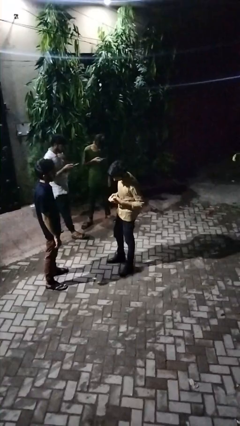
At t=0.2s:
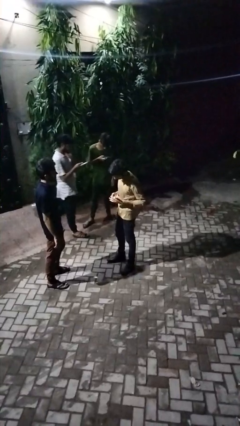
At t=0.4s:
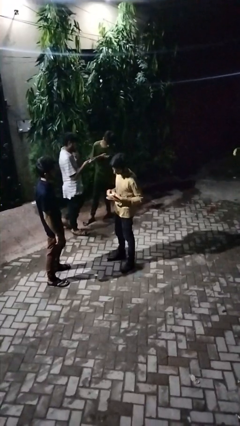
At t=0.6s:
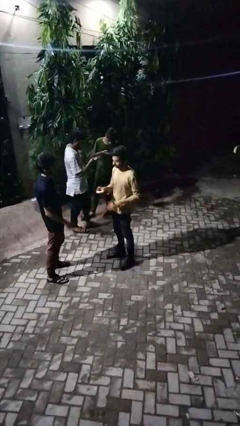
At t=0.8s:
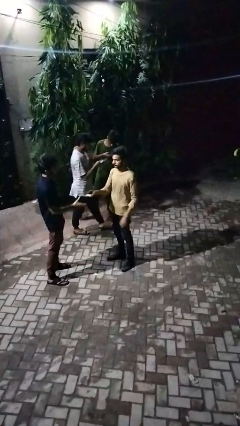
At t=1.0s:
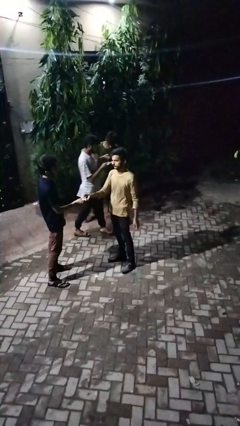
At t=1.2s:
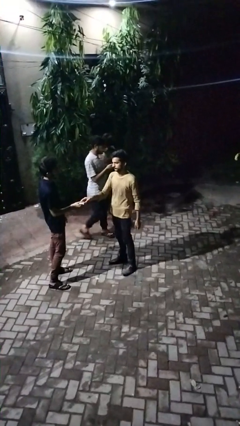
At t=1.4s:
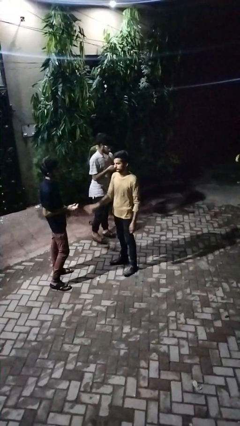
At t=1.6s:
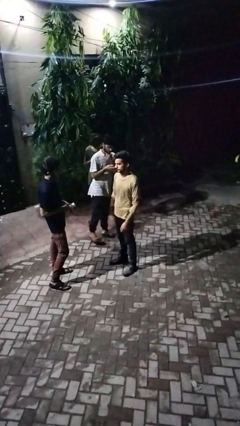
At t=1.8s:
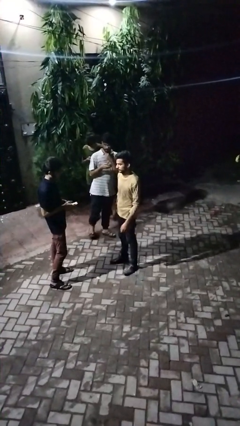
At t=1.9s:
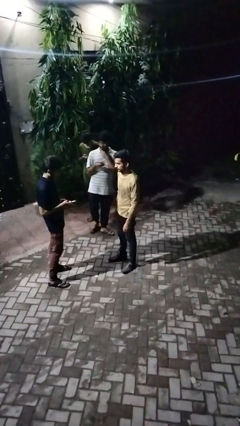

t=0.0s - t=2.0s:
person transfers object to person

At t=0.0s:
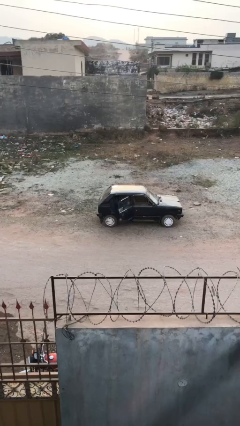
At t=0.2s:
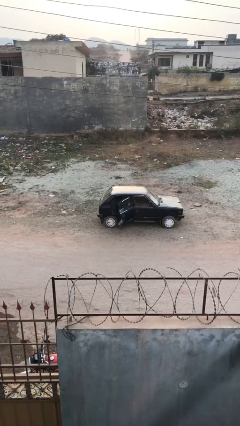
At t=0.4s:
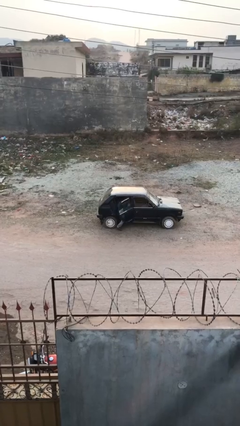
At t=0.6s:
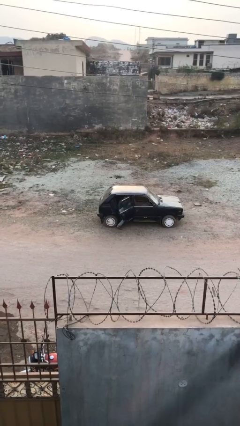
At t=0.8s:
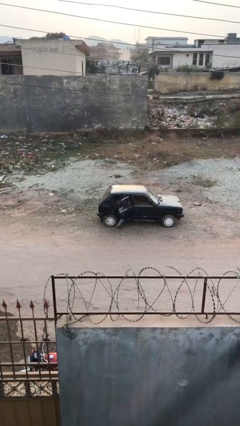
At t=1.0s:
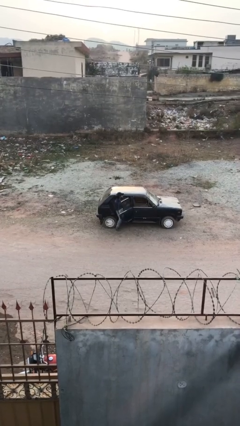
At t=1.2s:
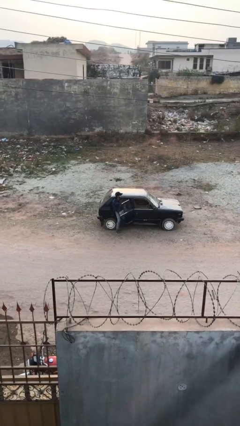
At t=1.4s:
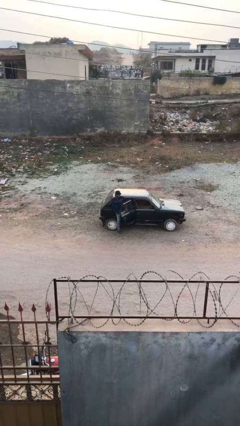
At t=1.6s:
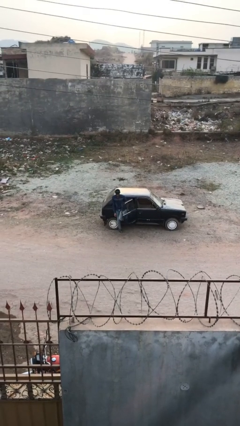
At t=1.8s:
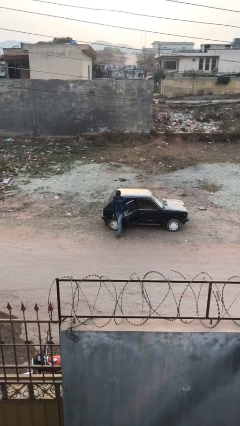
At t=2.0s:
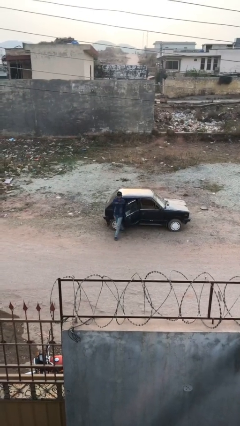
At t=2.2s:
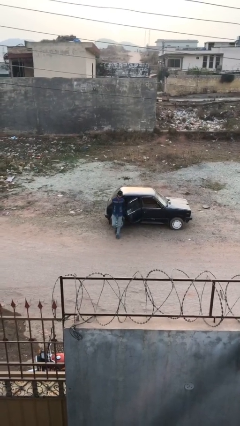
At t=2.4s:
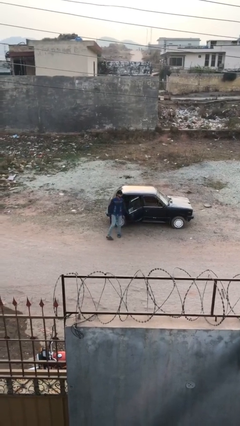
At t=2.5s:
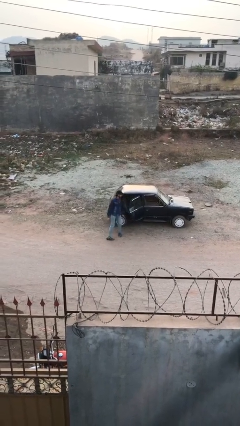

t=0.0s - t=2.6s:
person exits car

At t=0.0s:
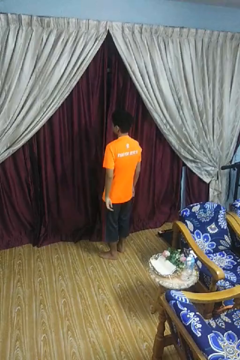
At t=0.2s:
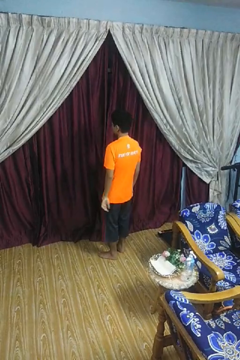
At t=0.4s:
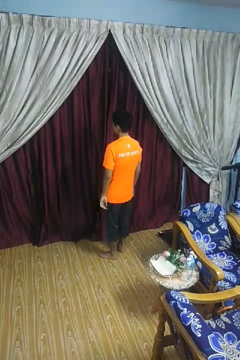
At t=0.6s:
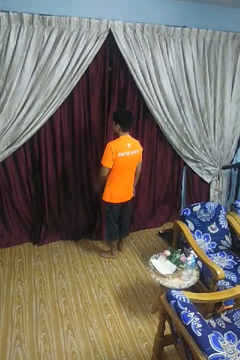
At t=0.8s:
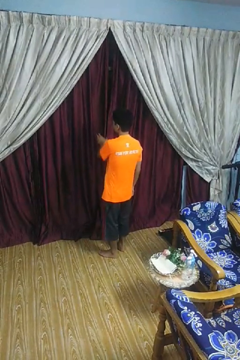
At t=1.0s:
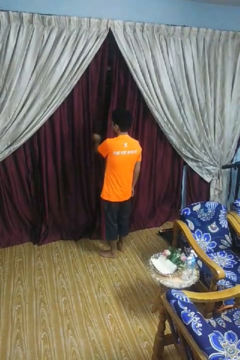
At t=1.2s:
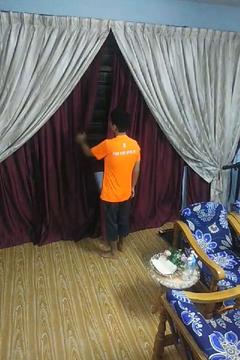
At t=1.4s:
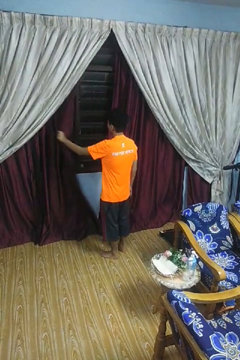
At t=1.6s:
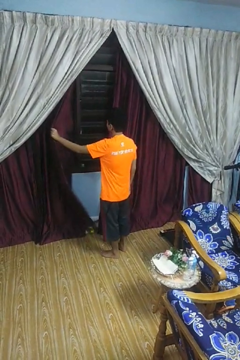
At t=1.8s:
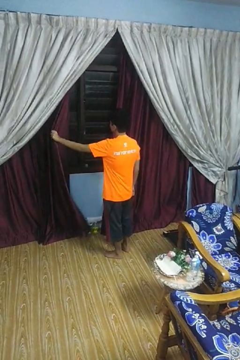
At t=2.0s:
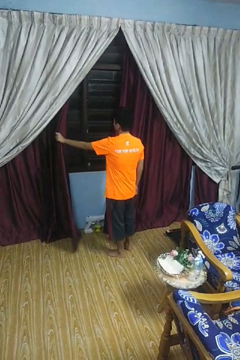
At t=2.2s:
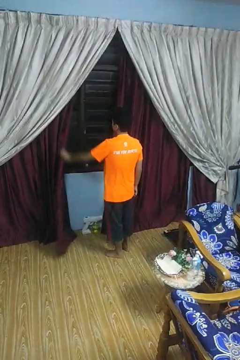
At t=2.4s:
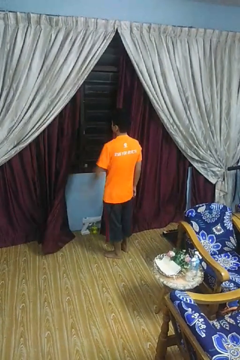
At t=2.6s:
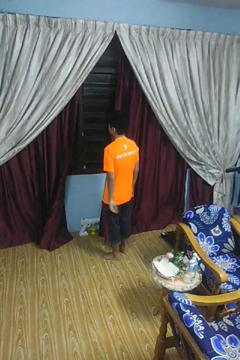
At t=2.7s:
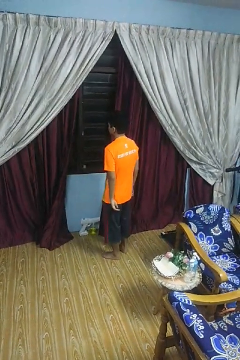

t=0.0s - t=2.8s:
person opens curtains

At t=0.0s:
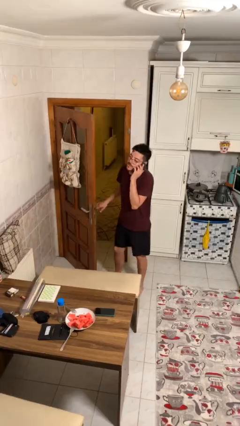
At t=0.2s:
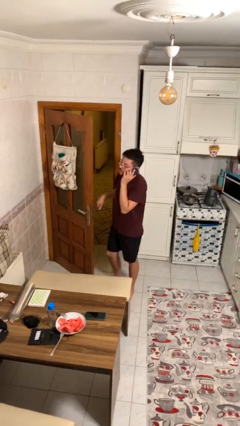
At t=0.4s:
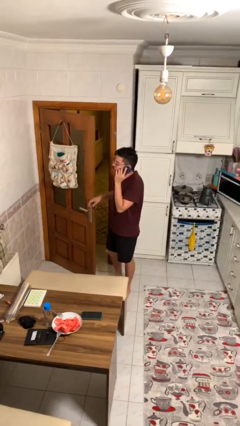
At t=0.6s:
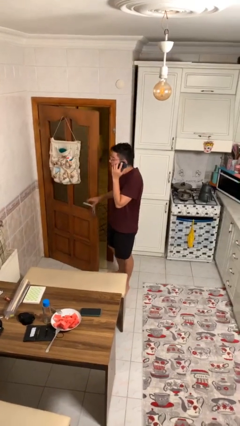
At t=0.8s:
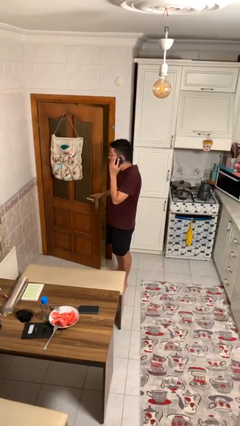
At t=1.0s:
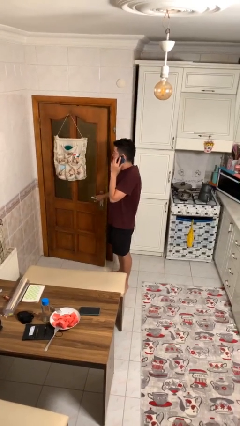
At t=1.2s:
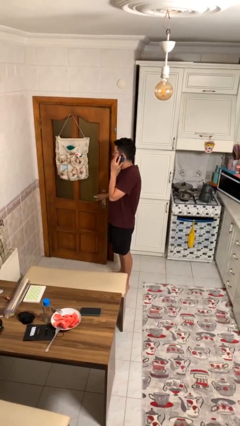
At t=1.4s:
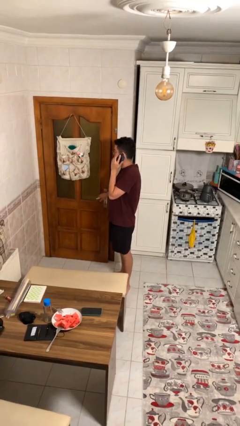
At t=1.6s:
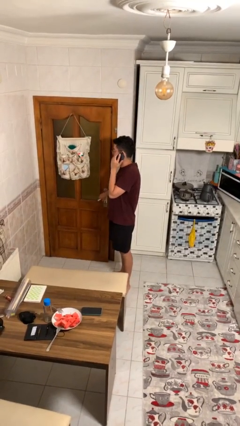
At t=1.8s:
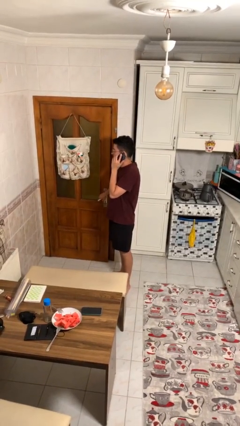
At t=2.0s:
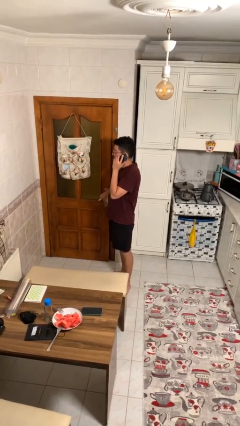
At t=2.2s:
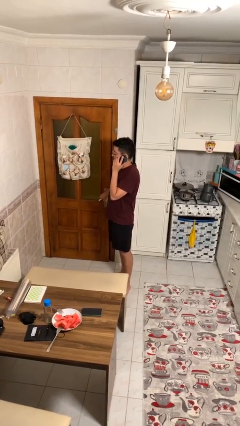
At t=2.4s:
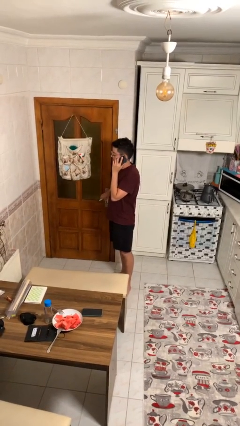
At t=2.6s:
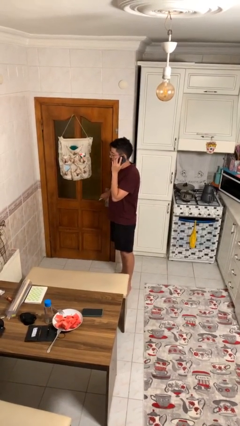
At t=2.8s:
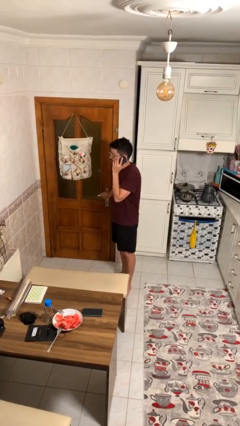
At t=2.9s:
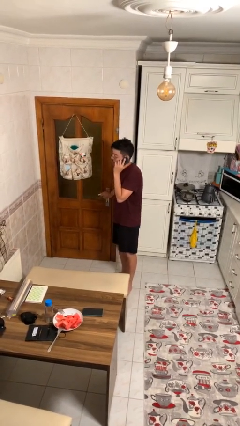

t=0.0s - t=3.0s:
person closes facility door

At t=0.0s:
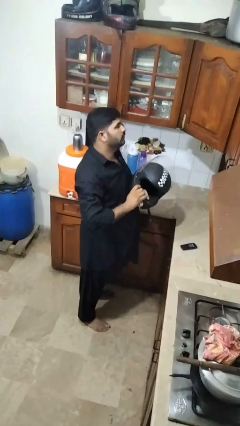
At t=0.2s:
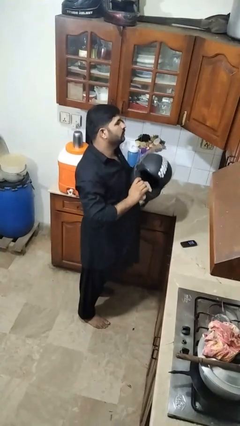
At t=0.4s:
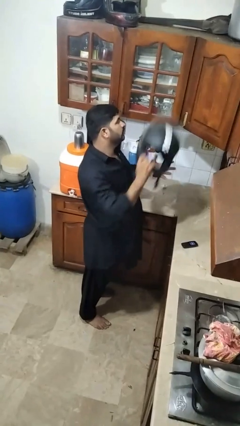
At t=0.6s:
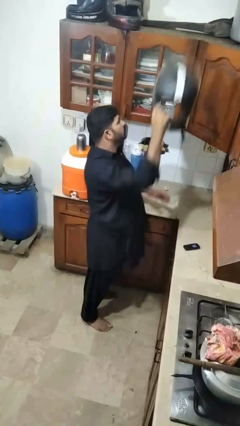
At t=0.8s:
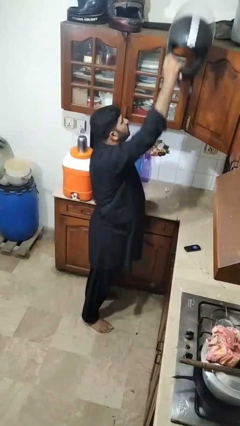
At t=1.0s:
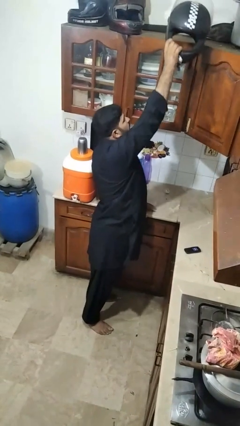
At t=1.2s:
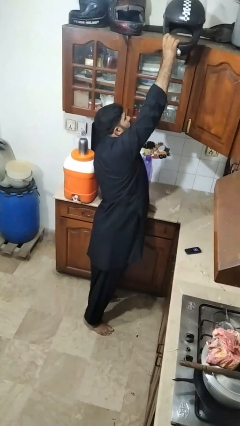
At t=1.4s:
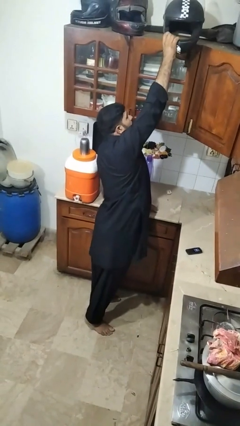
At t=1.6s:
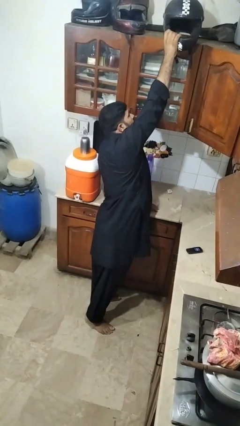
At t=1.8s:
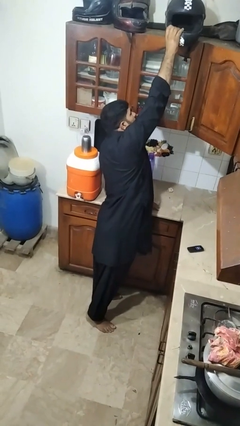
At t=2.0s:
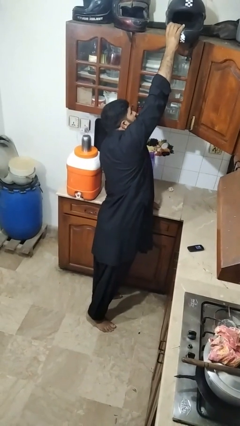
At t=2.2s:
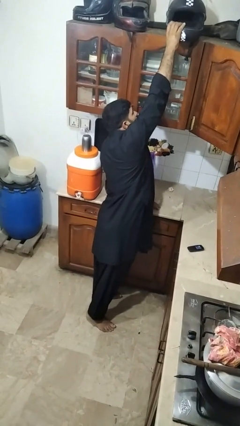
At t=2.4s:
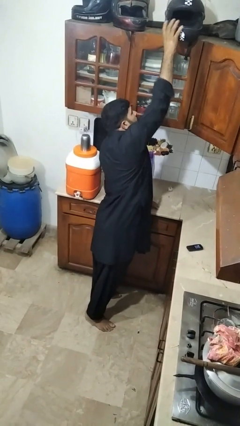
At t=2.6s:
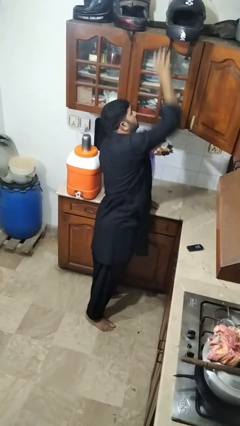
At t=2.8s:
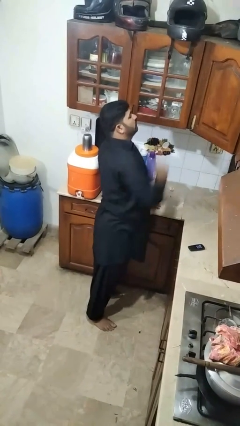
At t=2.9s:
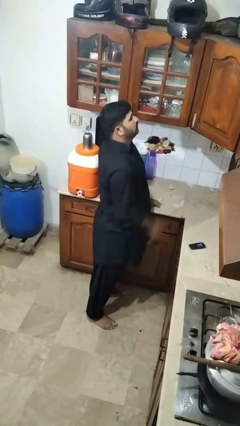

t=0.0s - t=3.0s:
person puts down object on shelf

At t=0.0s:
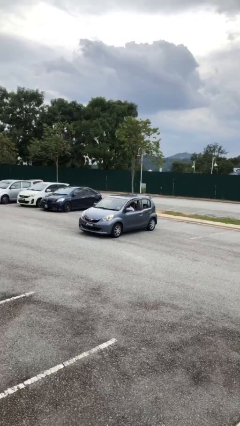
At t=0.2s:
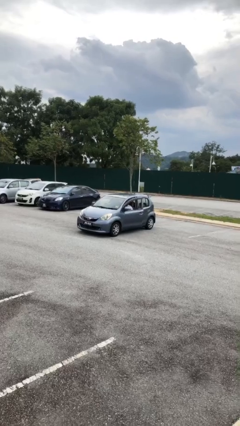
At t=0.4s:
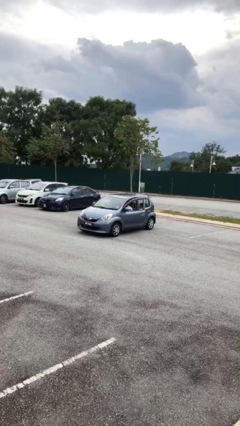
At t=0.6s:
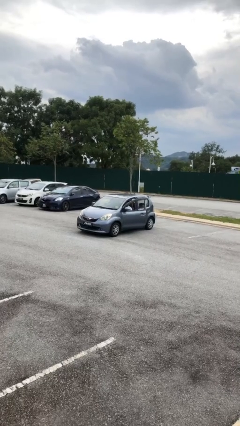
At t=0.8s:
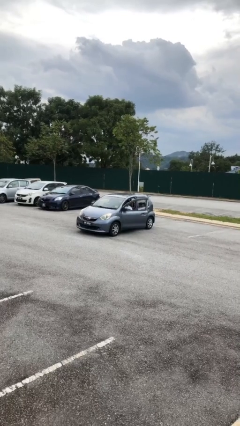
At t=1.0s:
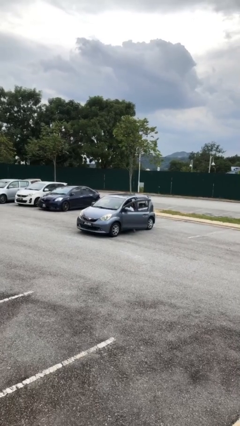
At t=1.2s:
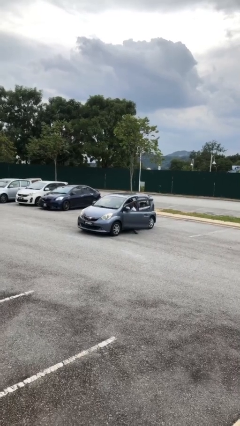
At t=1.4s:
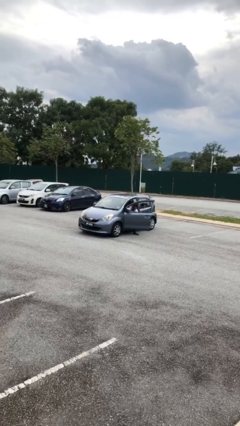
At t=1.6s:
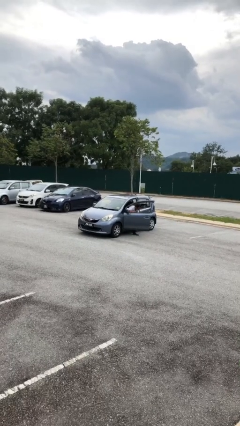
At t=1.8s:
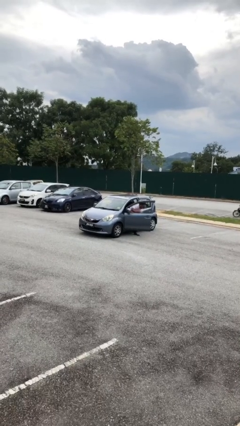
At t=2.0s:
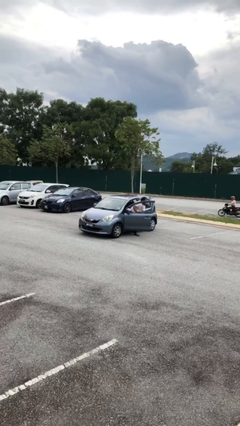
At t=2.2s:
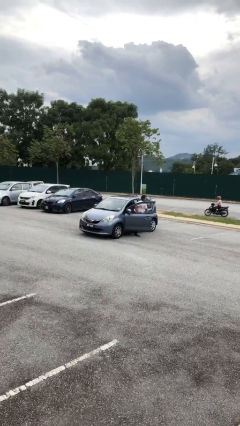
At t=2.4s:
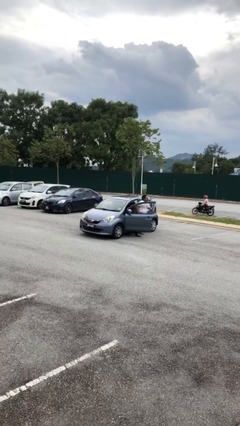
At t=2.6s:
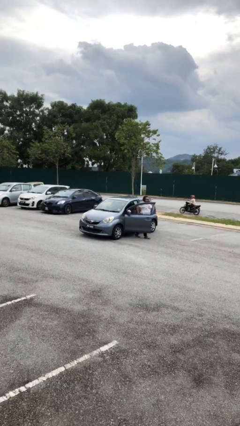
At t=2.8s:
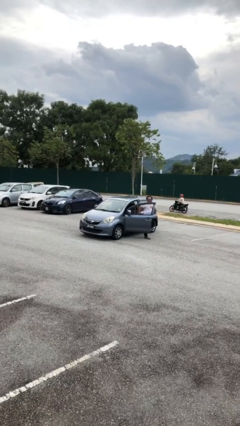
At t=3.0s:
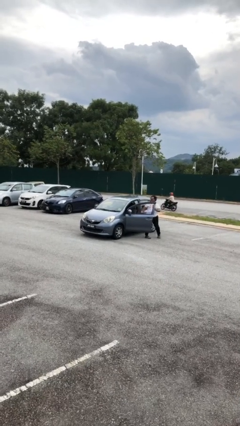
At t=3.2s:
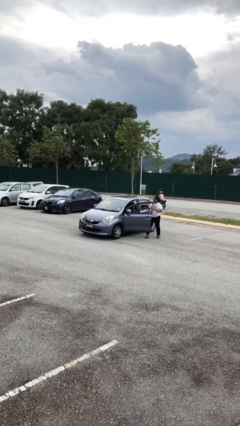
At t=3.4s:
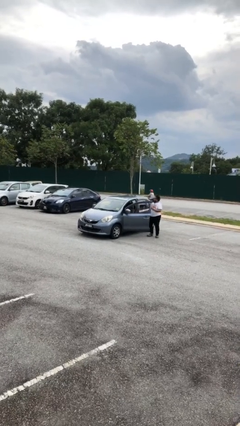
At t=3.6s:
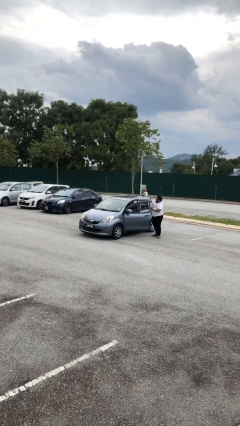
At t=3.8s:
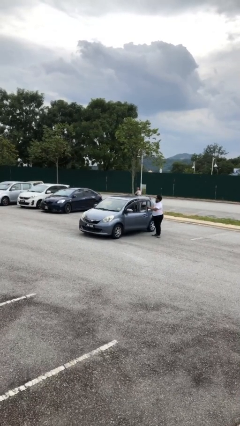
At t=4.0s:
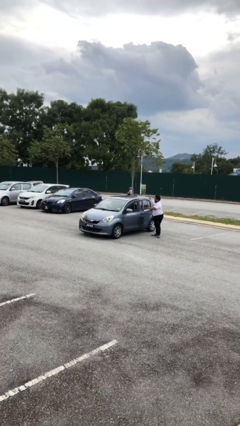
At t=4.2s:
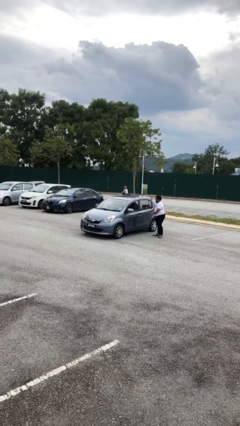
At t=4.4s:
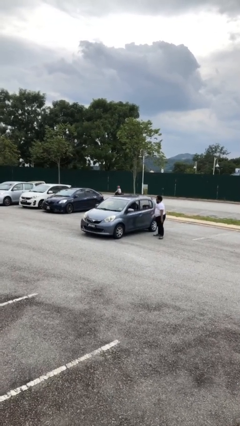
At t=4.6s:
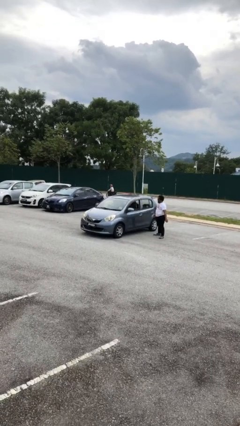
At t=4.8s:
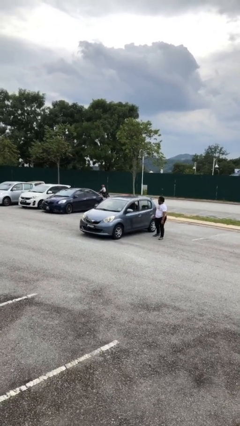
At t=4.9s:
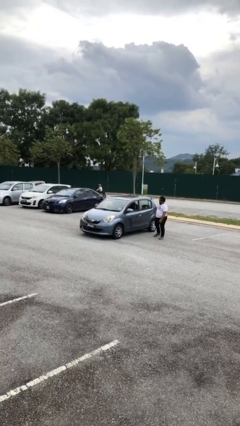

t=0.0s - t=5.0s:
car drops off person
